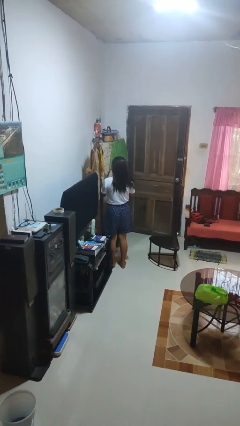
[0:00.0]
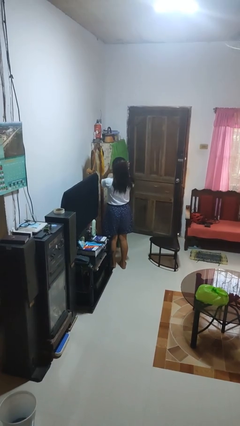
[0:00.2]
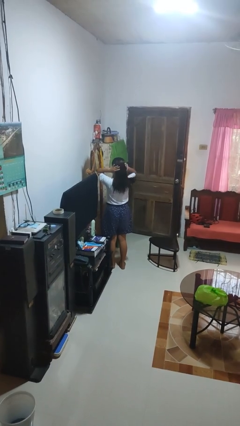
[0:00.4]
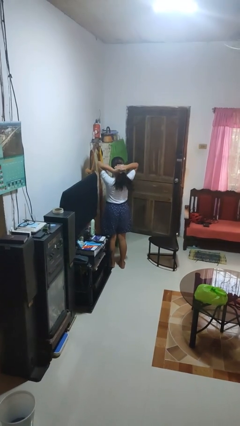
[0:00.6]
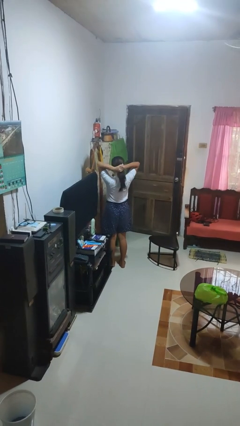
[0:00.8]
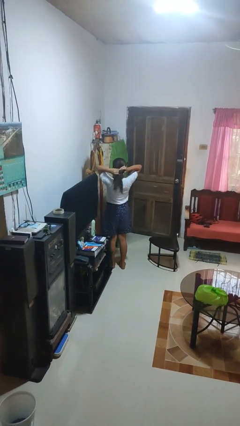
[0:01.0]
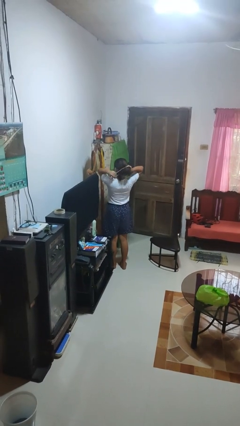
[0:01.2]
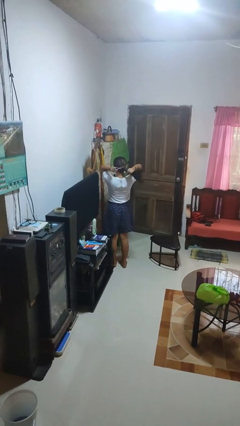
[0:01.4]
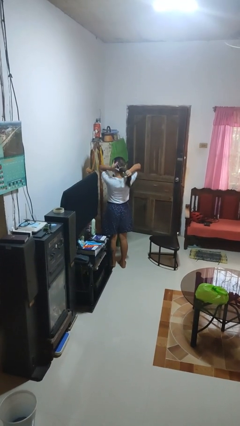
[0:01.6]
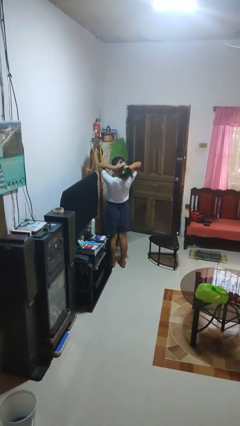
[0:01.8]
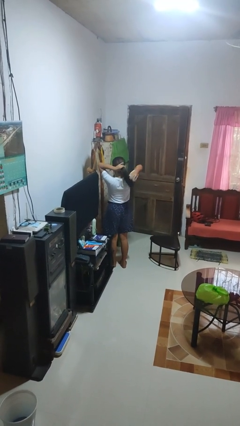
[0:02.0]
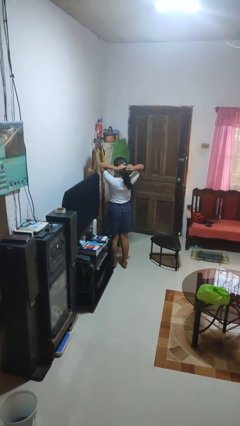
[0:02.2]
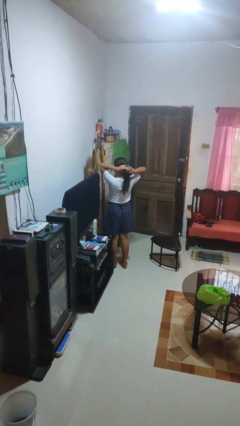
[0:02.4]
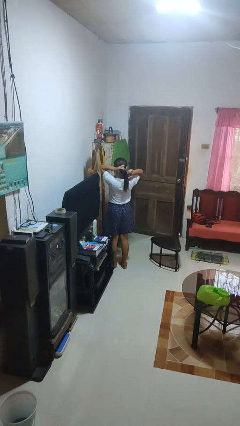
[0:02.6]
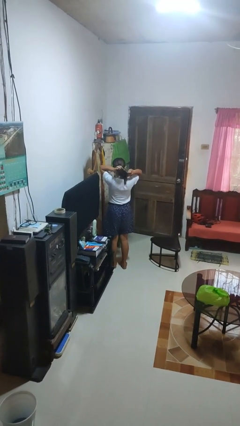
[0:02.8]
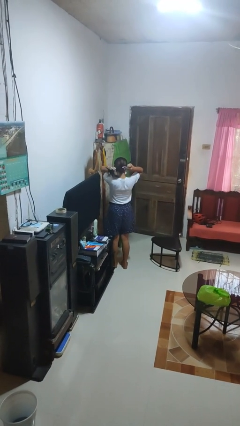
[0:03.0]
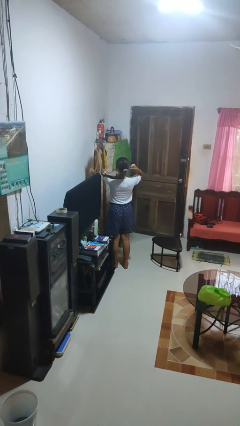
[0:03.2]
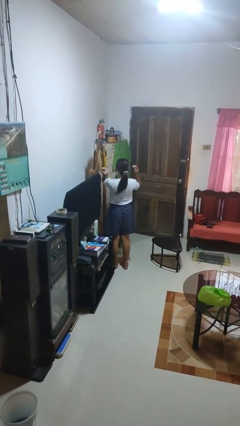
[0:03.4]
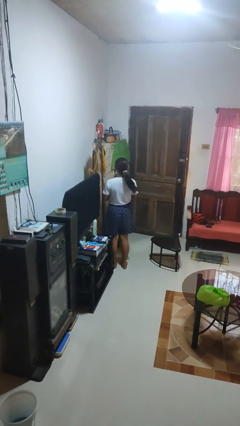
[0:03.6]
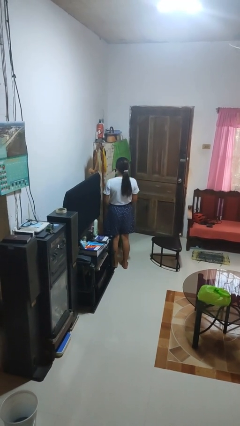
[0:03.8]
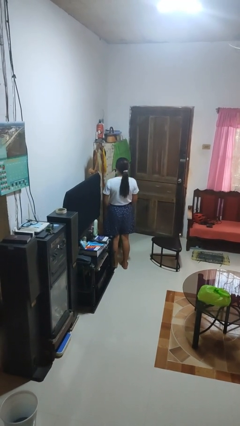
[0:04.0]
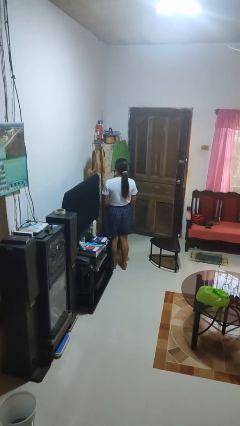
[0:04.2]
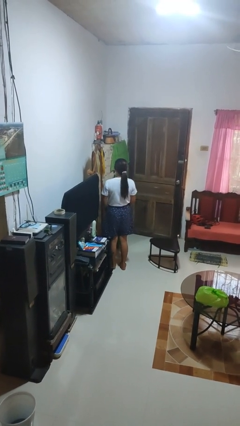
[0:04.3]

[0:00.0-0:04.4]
person puts hair in ponytail

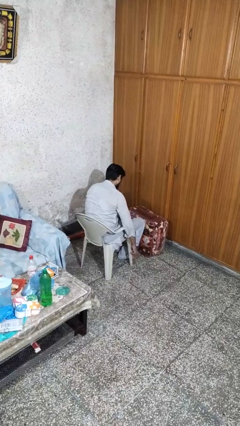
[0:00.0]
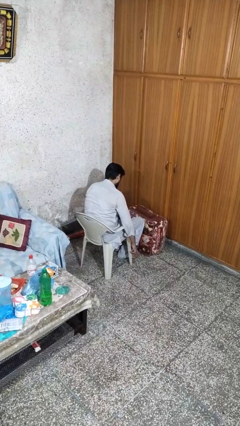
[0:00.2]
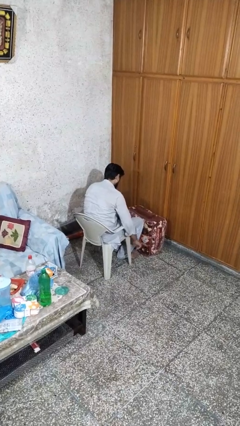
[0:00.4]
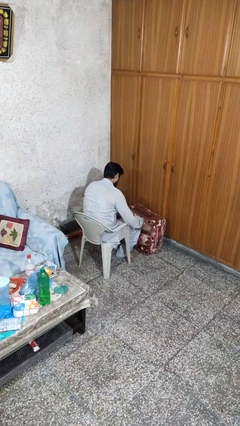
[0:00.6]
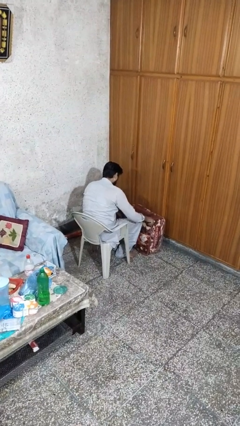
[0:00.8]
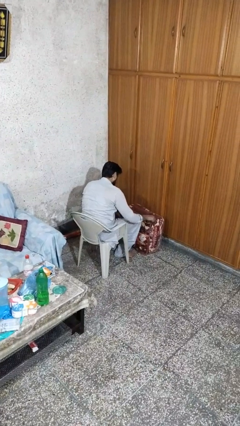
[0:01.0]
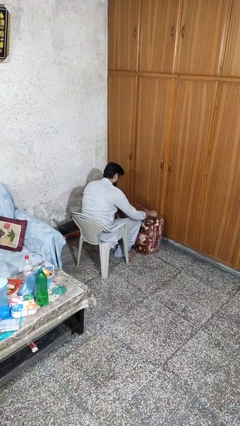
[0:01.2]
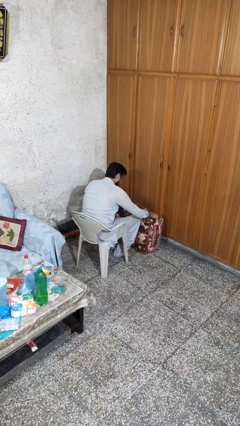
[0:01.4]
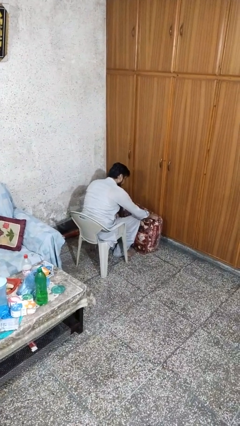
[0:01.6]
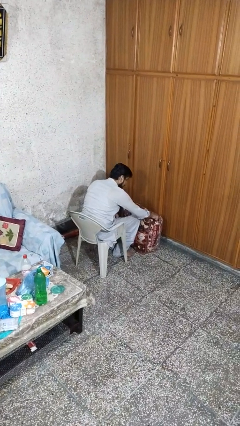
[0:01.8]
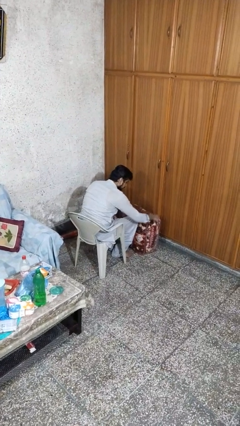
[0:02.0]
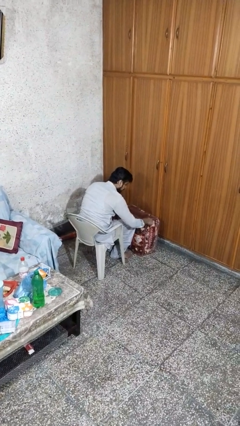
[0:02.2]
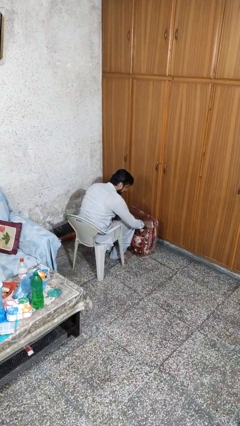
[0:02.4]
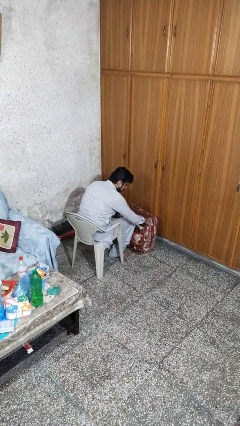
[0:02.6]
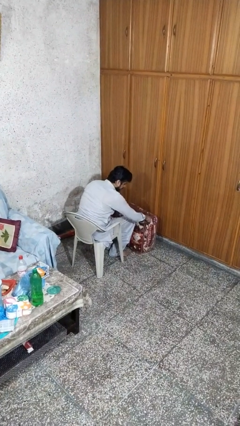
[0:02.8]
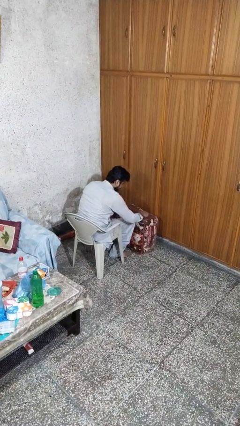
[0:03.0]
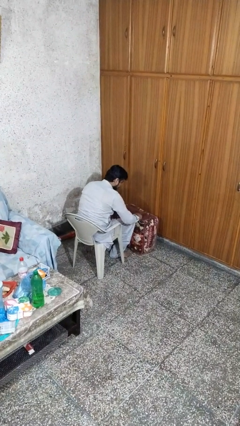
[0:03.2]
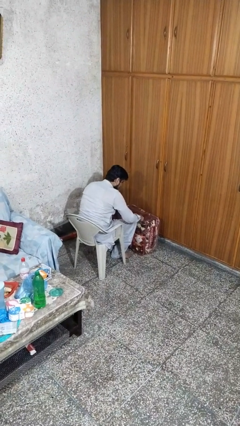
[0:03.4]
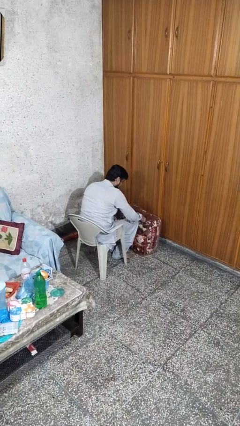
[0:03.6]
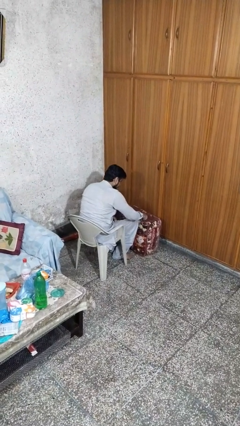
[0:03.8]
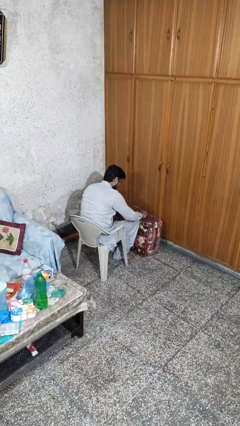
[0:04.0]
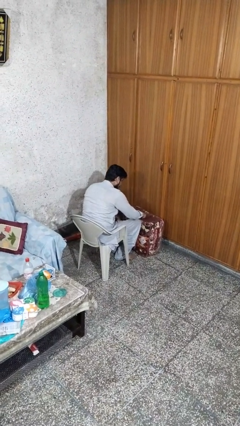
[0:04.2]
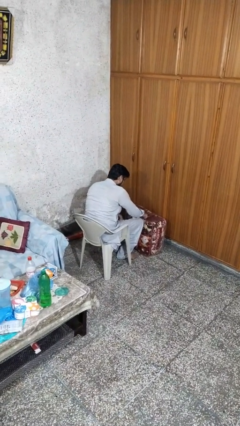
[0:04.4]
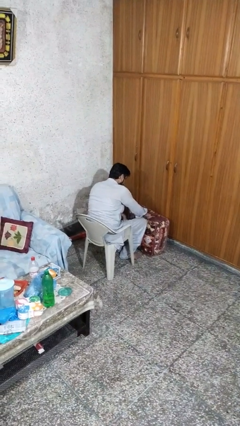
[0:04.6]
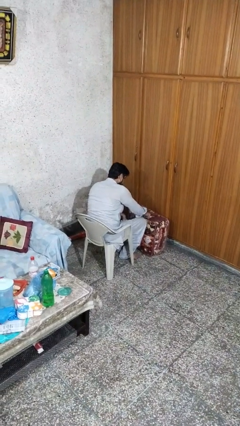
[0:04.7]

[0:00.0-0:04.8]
person taps object with finger

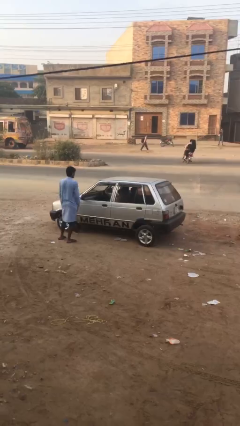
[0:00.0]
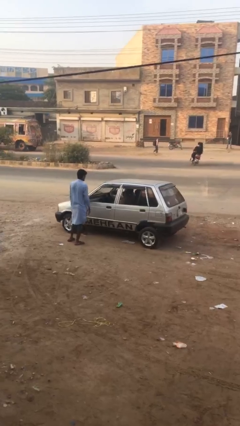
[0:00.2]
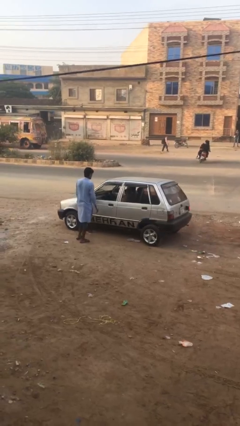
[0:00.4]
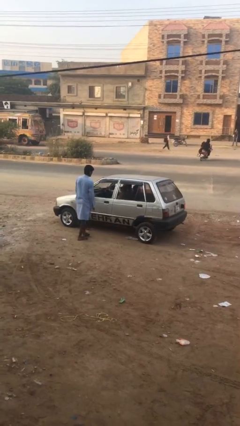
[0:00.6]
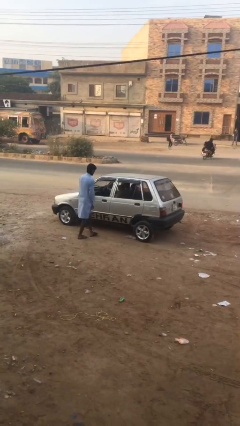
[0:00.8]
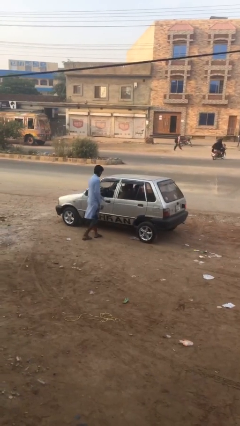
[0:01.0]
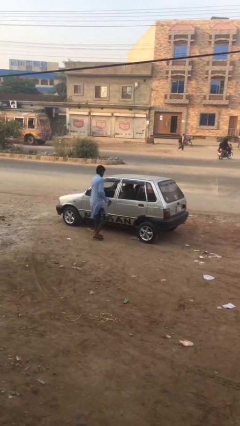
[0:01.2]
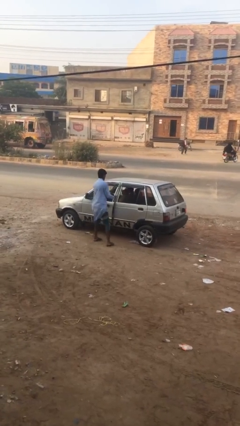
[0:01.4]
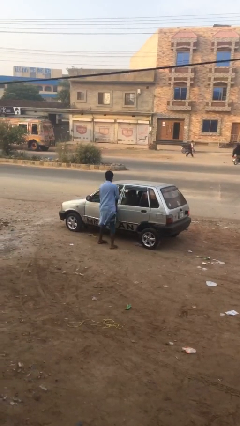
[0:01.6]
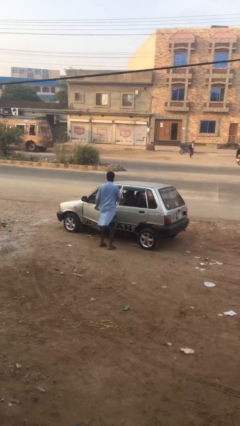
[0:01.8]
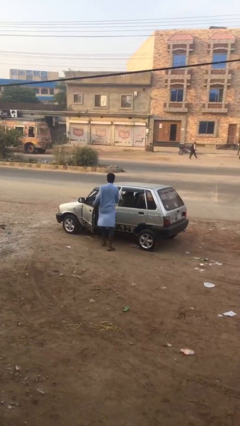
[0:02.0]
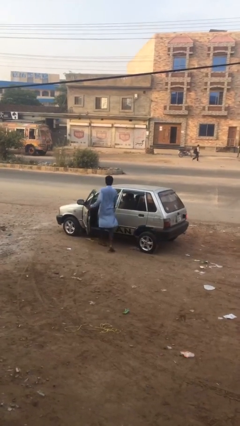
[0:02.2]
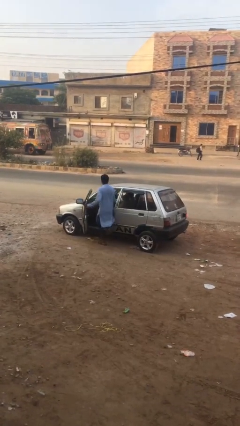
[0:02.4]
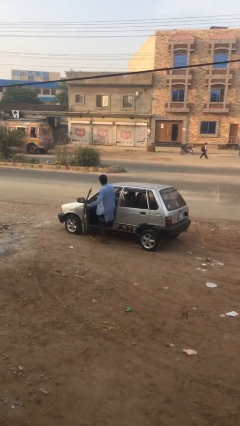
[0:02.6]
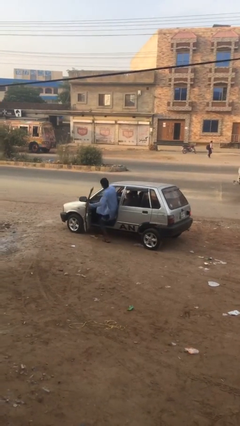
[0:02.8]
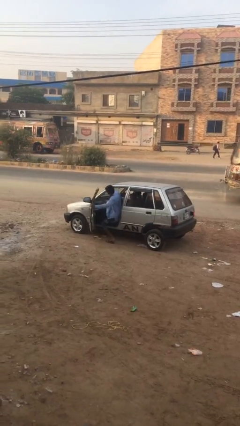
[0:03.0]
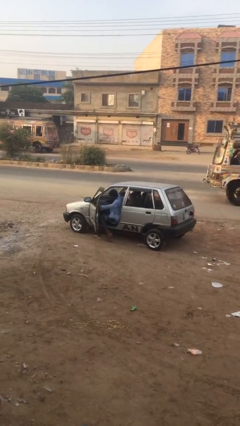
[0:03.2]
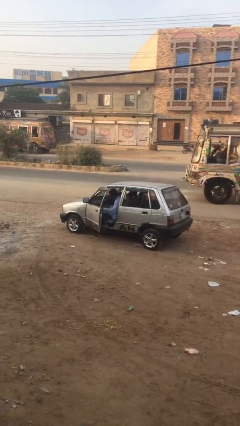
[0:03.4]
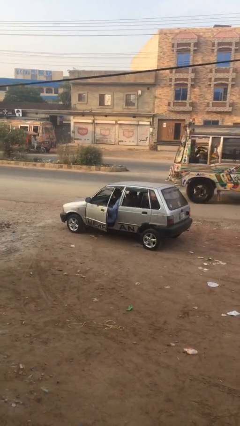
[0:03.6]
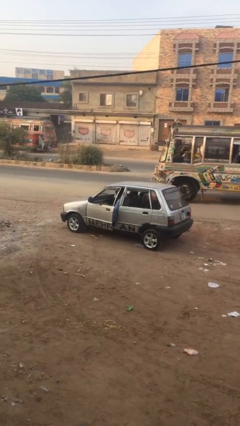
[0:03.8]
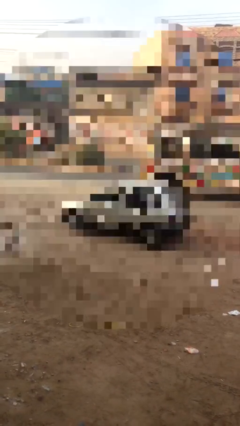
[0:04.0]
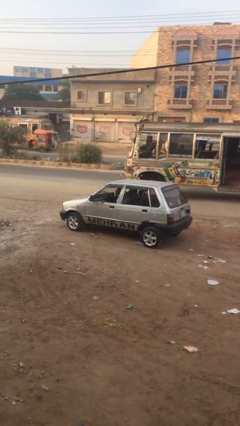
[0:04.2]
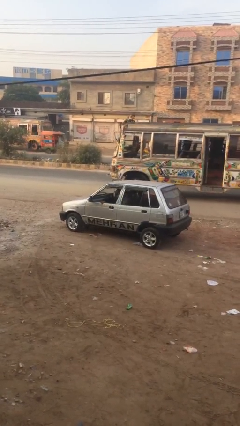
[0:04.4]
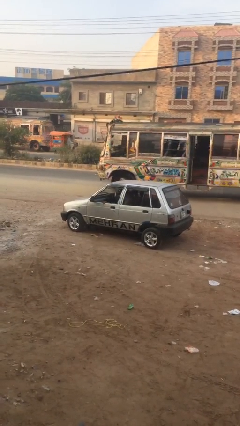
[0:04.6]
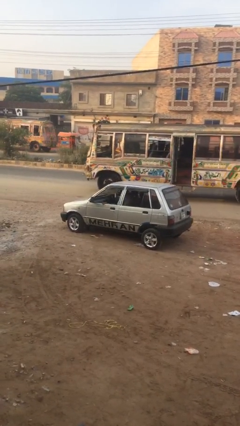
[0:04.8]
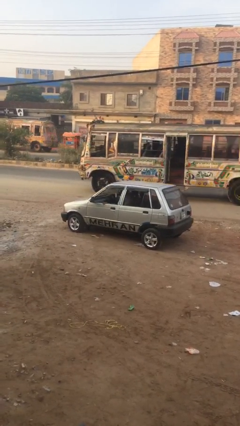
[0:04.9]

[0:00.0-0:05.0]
car picks up person

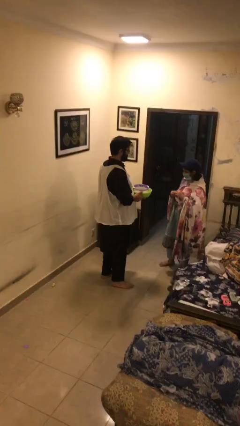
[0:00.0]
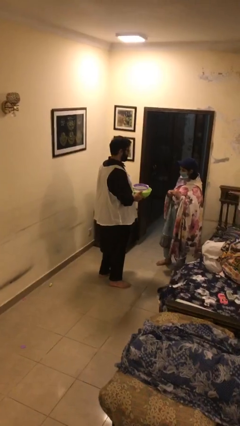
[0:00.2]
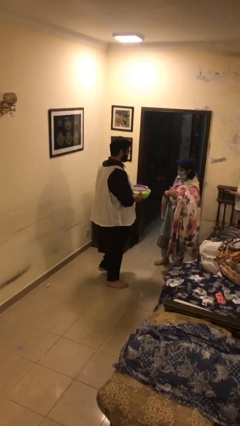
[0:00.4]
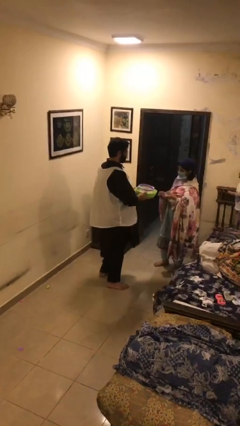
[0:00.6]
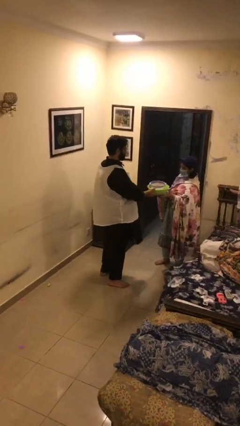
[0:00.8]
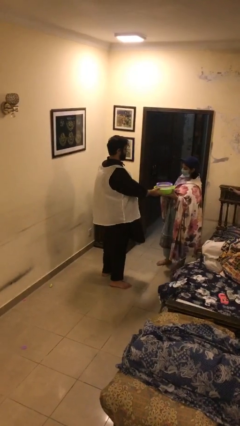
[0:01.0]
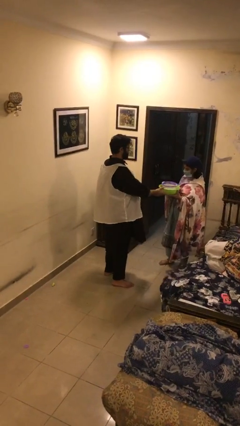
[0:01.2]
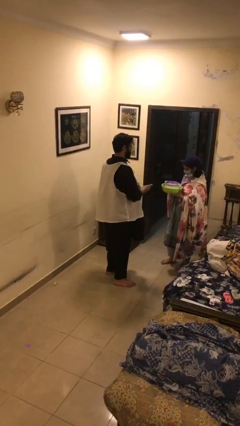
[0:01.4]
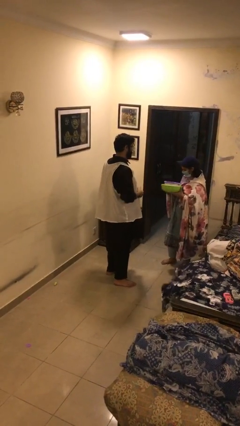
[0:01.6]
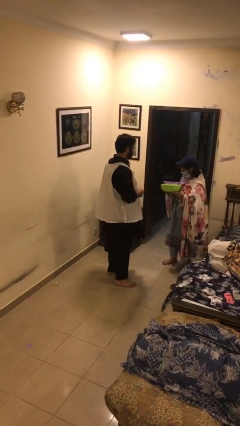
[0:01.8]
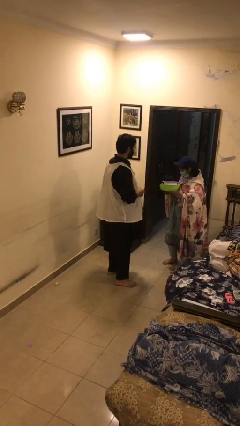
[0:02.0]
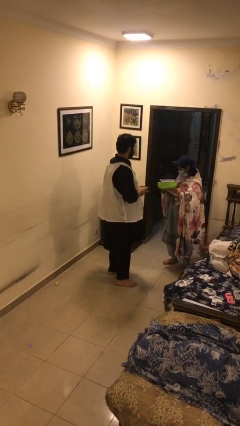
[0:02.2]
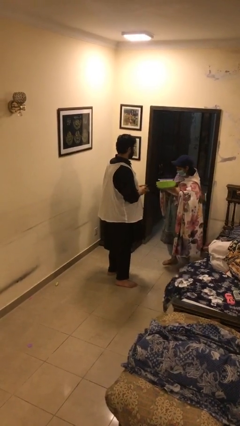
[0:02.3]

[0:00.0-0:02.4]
person transfers object to person

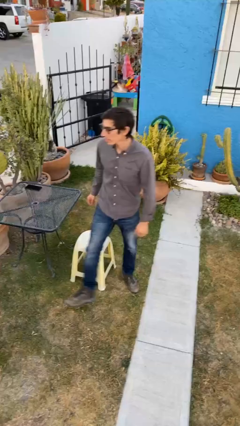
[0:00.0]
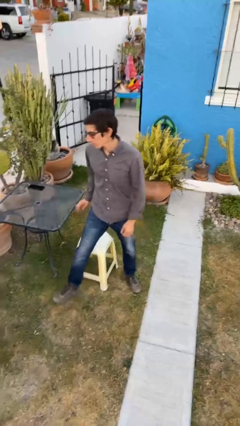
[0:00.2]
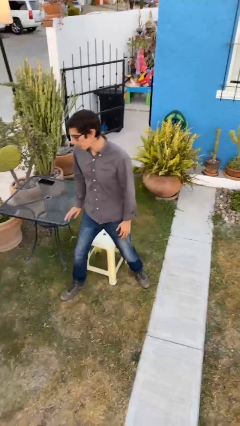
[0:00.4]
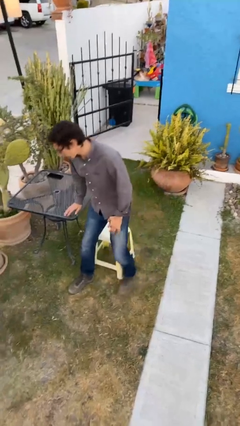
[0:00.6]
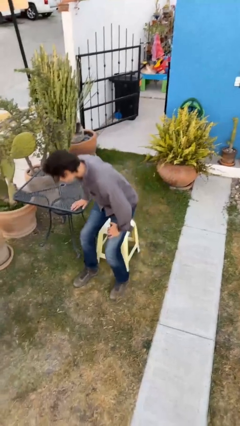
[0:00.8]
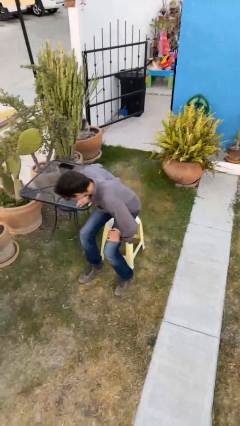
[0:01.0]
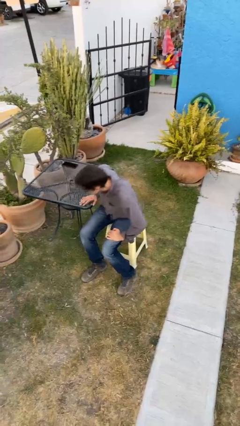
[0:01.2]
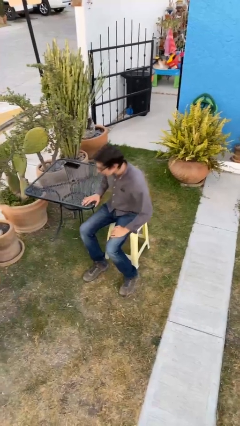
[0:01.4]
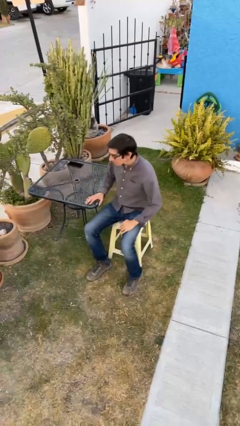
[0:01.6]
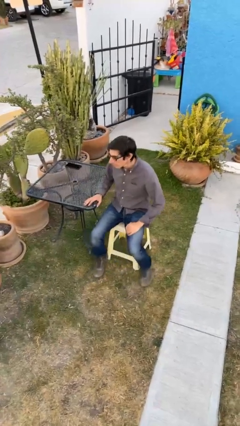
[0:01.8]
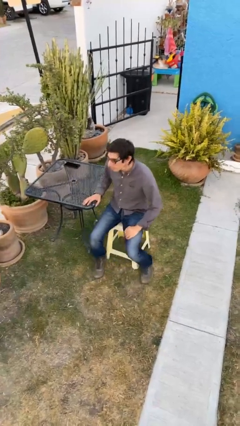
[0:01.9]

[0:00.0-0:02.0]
person sits down
